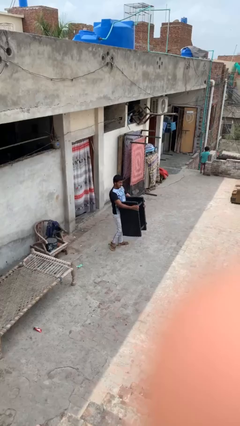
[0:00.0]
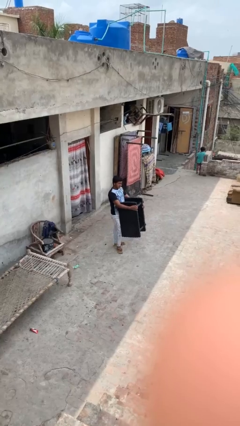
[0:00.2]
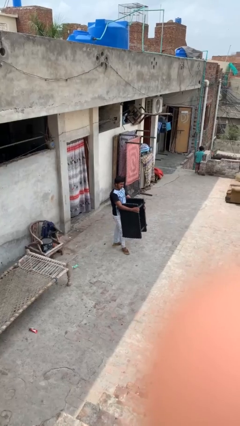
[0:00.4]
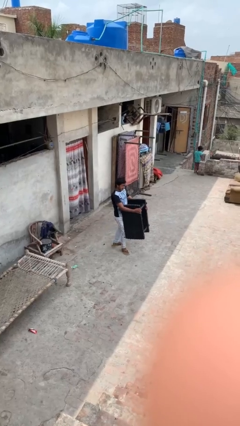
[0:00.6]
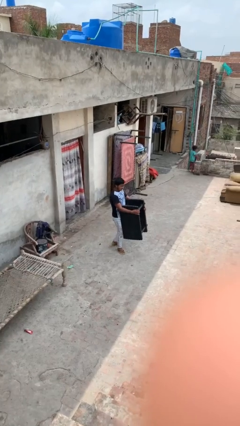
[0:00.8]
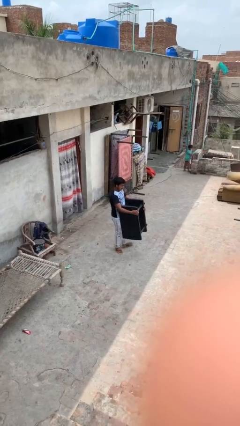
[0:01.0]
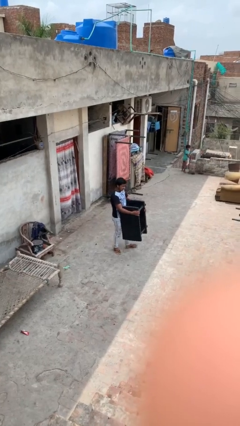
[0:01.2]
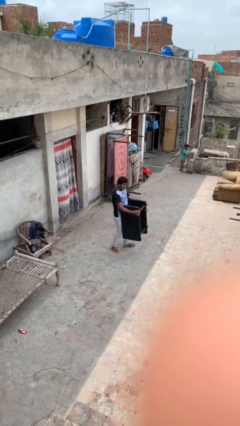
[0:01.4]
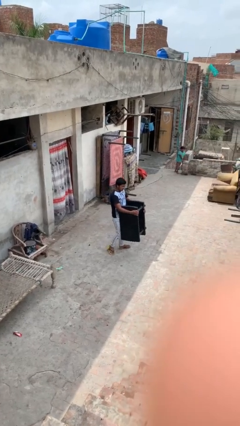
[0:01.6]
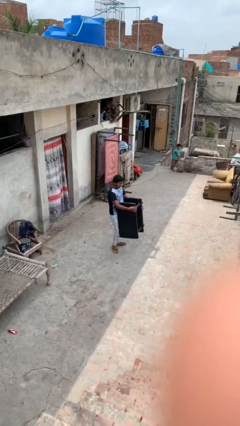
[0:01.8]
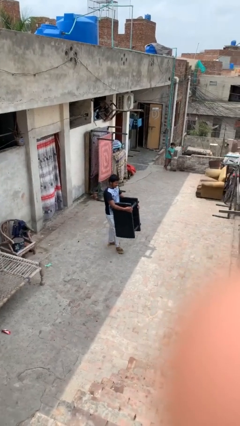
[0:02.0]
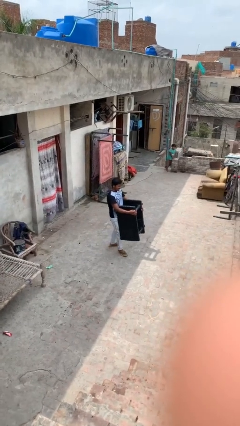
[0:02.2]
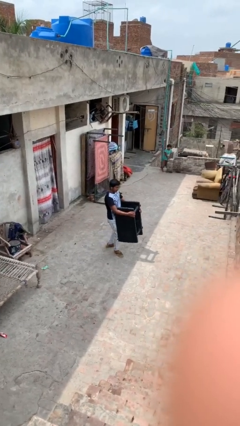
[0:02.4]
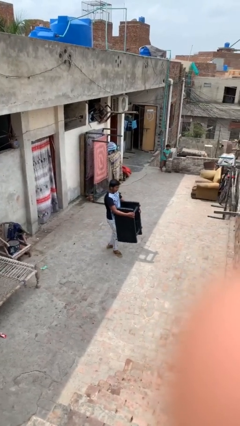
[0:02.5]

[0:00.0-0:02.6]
person carries heavy object

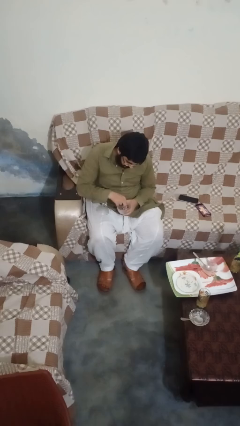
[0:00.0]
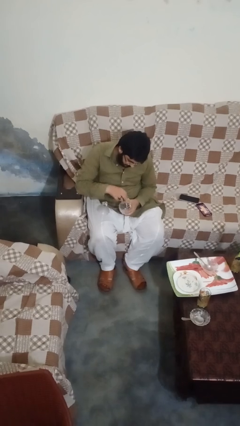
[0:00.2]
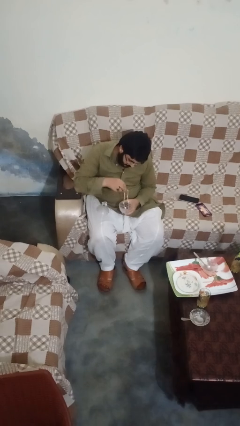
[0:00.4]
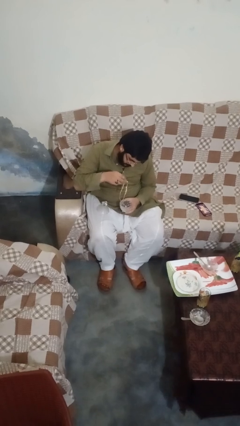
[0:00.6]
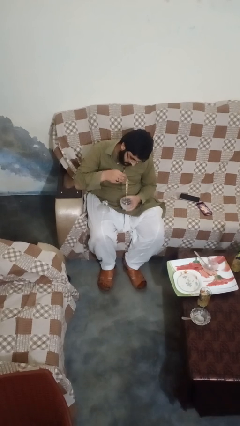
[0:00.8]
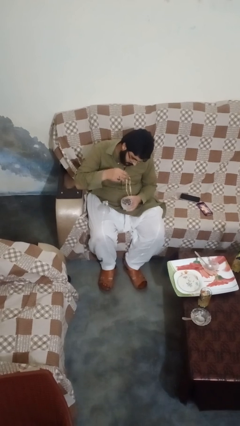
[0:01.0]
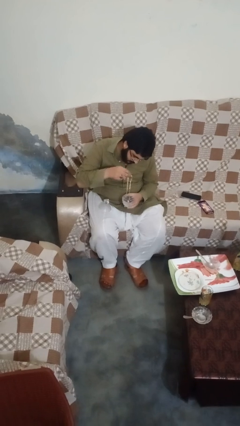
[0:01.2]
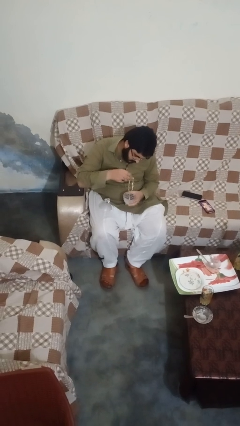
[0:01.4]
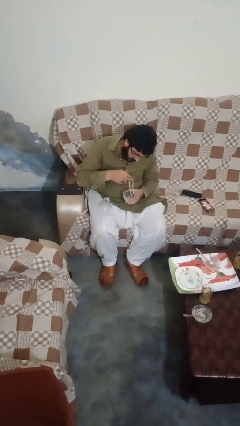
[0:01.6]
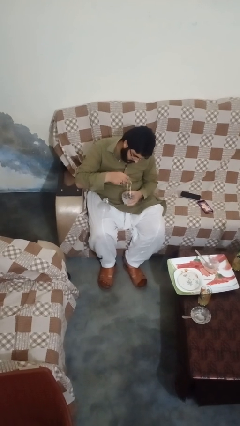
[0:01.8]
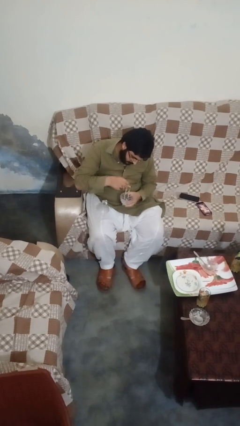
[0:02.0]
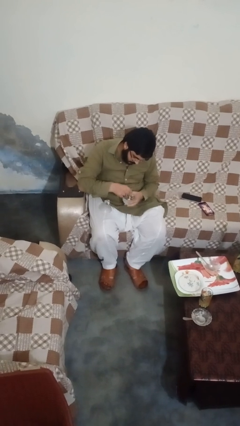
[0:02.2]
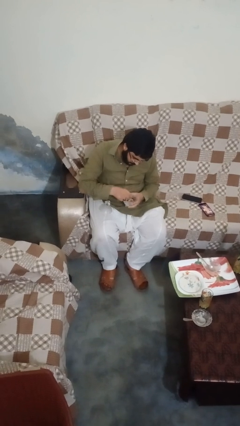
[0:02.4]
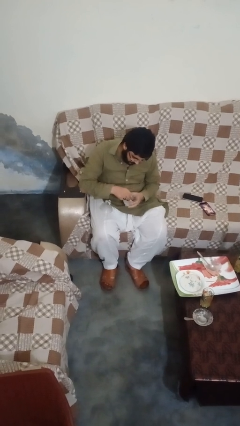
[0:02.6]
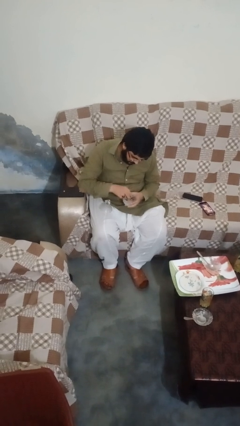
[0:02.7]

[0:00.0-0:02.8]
person searches jewelry box

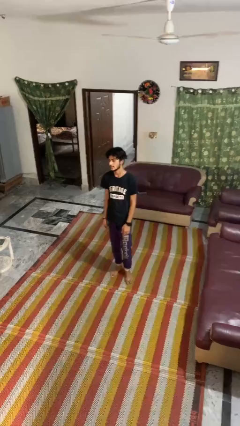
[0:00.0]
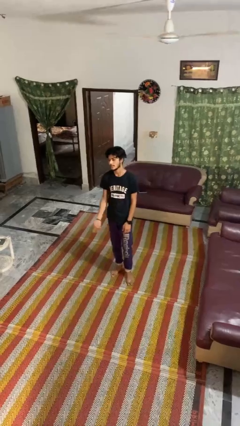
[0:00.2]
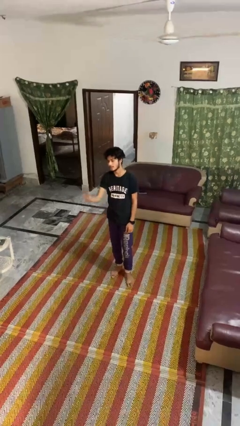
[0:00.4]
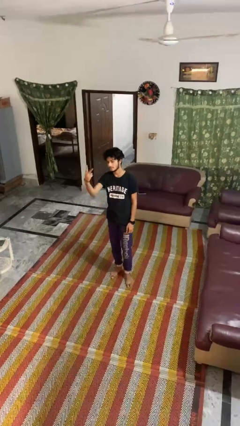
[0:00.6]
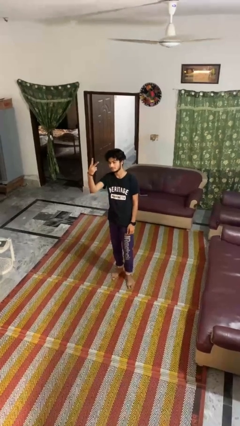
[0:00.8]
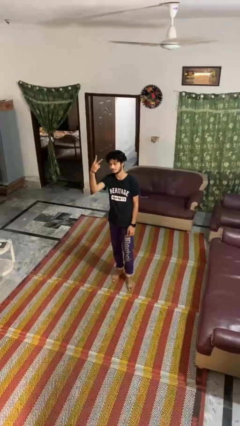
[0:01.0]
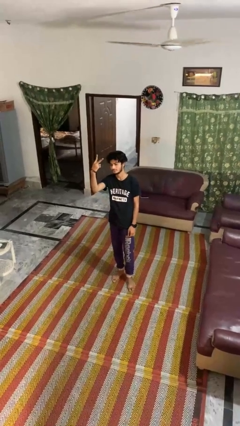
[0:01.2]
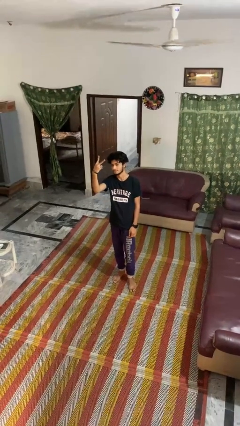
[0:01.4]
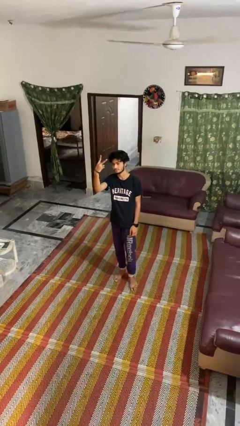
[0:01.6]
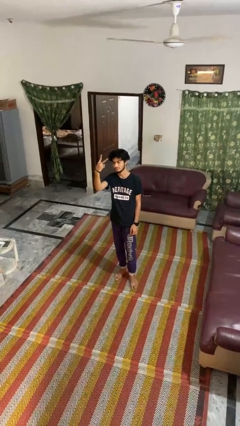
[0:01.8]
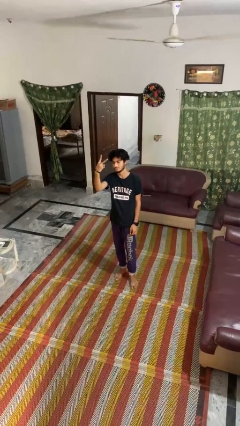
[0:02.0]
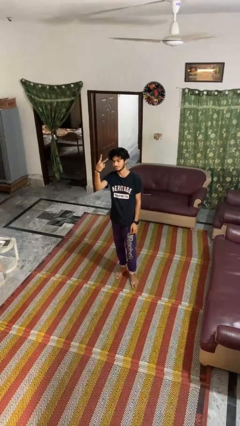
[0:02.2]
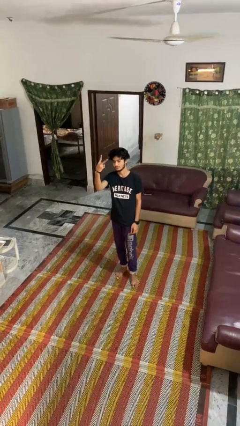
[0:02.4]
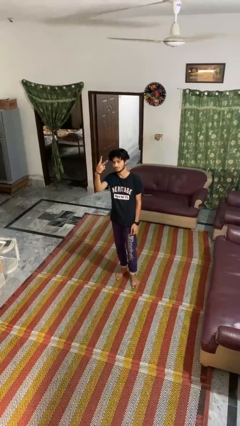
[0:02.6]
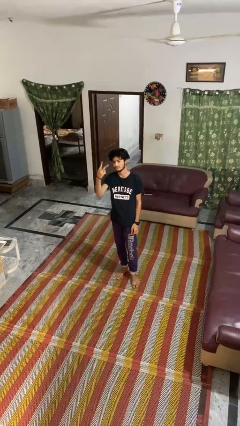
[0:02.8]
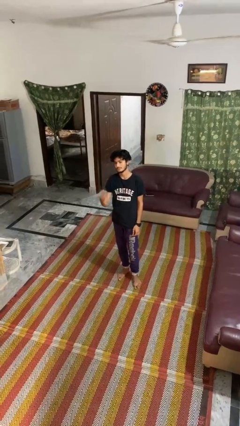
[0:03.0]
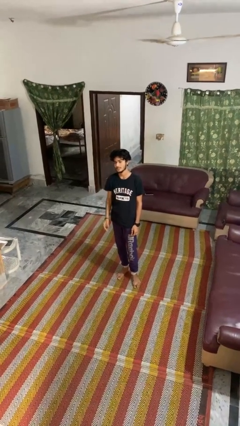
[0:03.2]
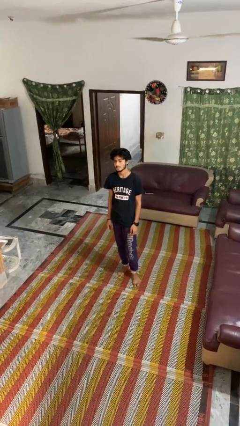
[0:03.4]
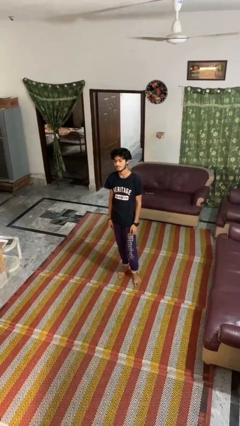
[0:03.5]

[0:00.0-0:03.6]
person gestures peace

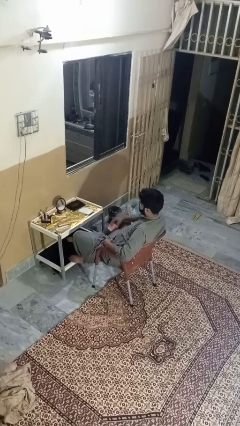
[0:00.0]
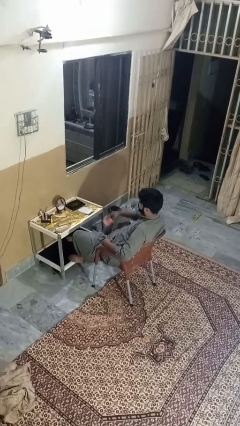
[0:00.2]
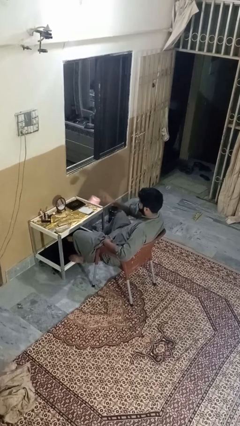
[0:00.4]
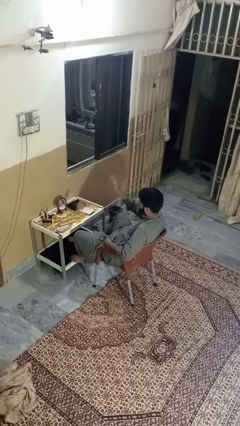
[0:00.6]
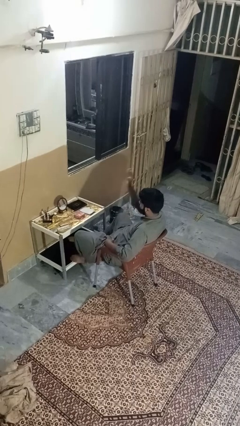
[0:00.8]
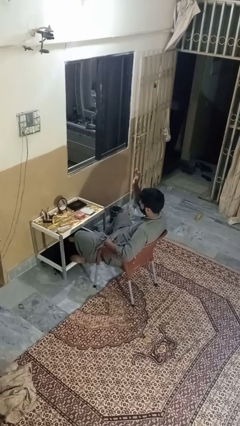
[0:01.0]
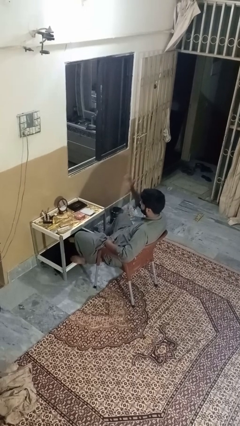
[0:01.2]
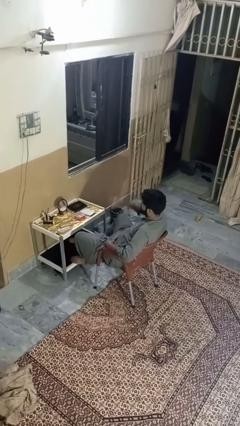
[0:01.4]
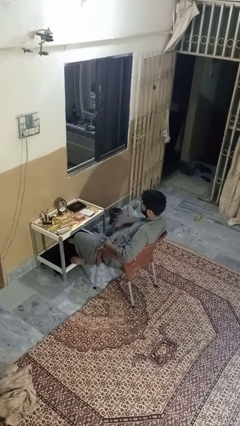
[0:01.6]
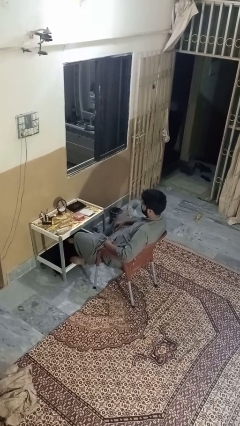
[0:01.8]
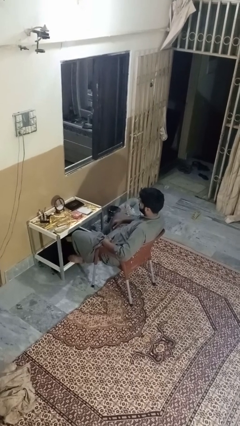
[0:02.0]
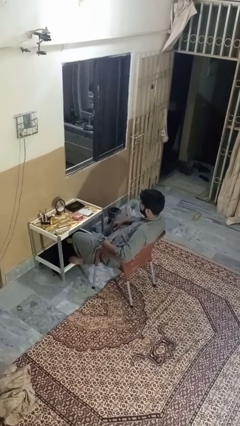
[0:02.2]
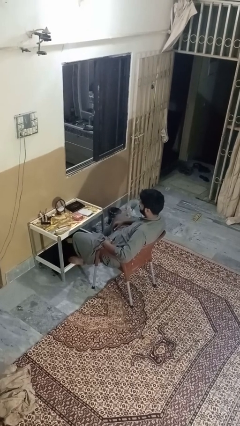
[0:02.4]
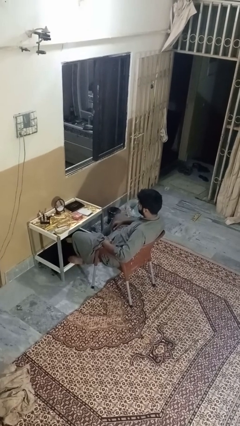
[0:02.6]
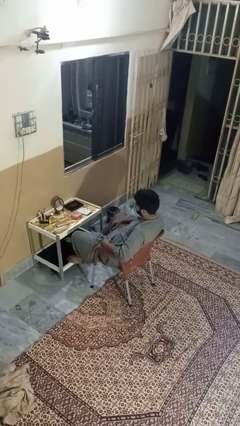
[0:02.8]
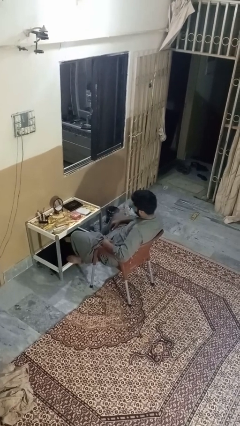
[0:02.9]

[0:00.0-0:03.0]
person throws object on table

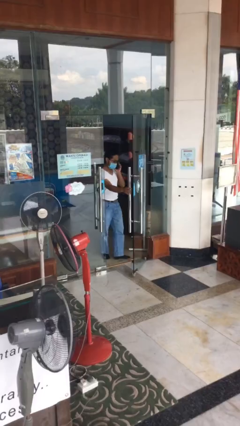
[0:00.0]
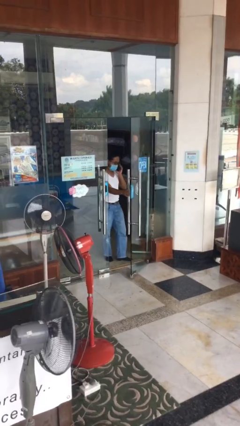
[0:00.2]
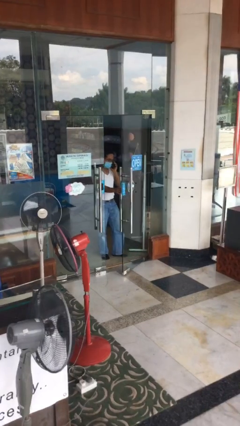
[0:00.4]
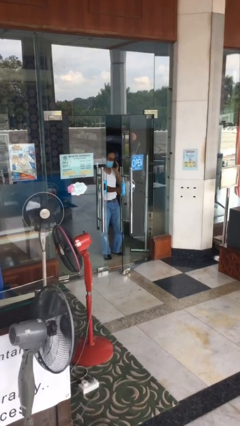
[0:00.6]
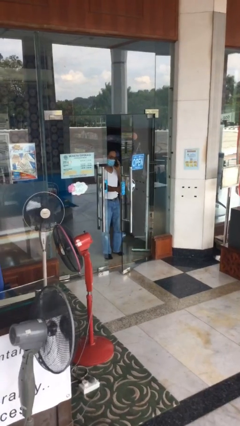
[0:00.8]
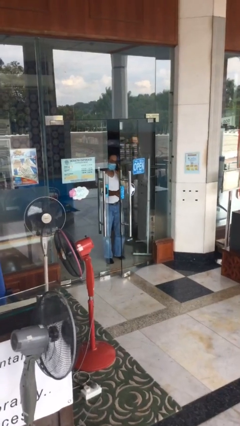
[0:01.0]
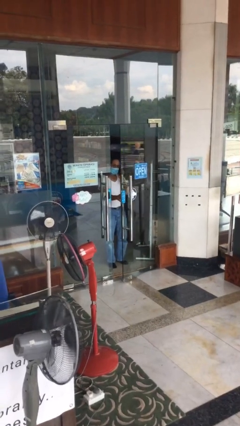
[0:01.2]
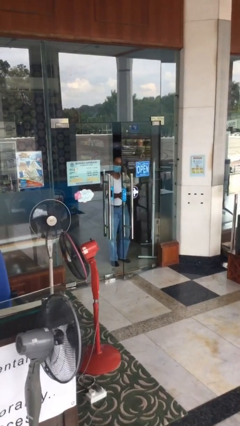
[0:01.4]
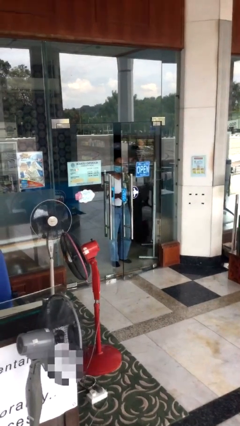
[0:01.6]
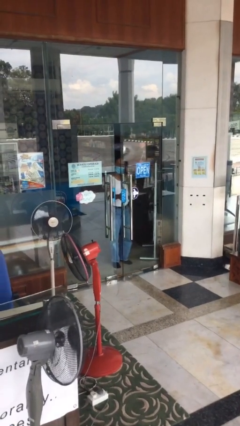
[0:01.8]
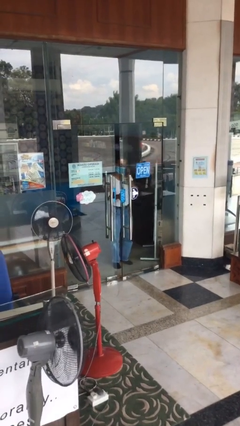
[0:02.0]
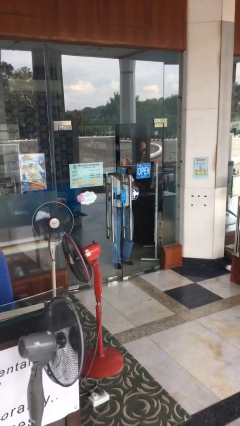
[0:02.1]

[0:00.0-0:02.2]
person closes facility door

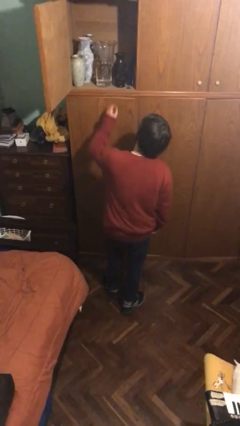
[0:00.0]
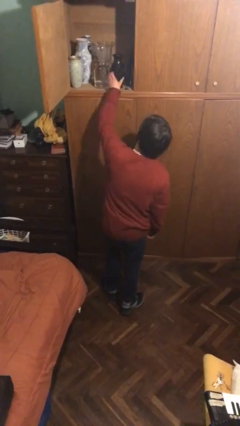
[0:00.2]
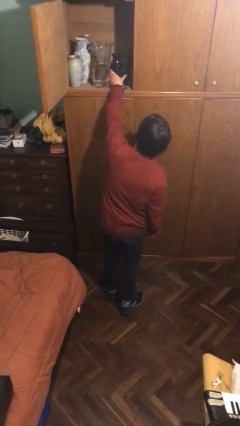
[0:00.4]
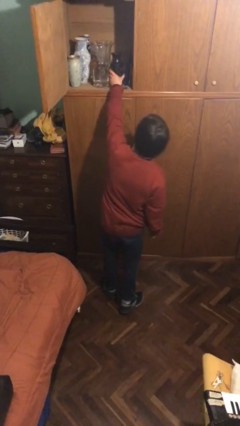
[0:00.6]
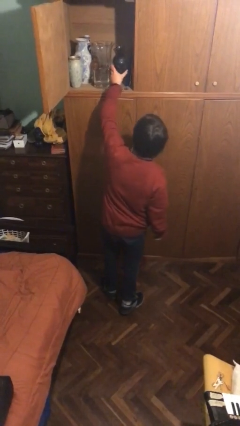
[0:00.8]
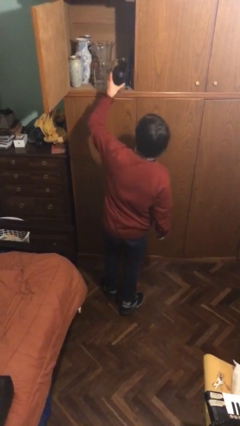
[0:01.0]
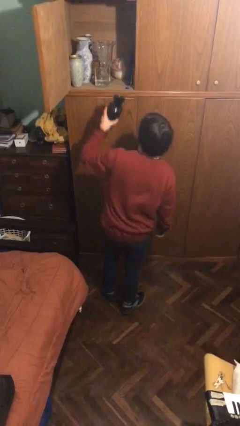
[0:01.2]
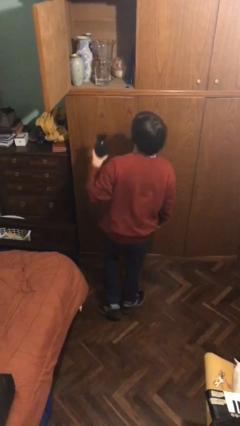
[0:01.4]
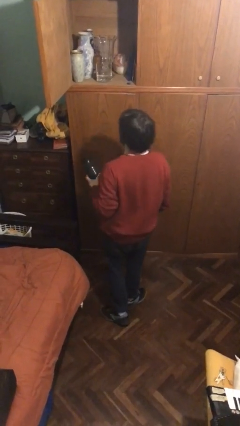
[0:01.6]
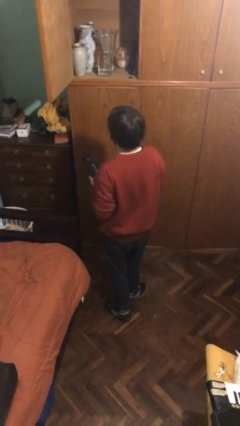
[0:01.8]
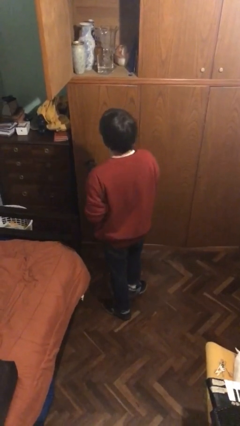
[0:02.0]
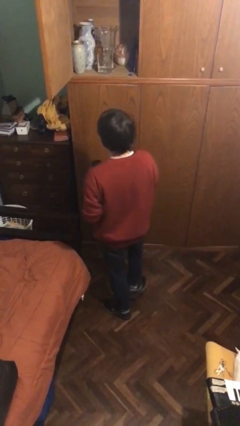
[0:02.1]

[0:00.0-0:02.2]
person picks up object from cabinet

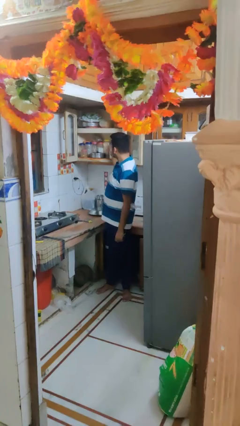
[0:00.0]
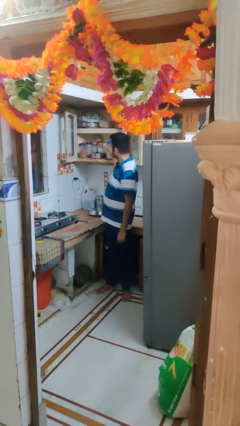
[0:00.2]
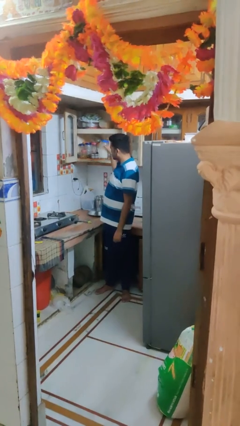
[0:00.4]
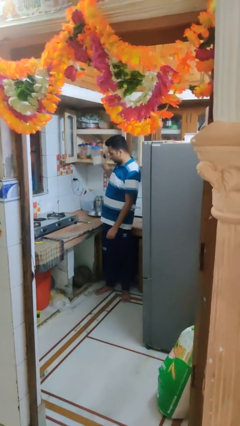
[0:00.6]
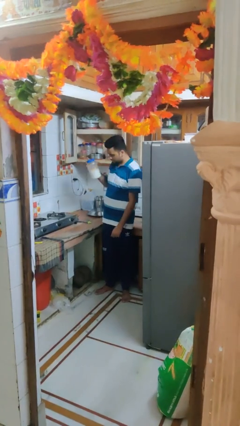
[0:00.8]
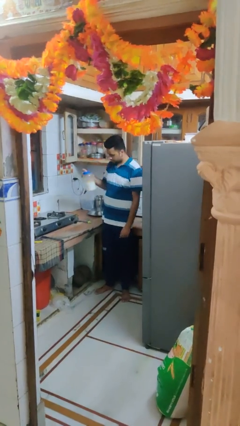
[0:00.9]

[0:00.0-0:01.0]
person takes object from cabinet
